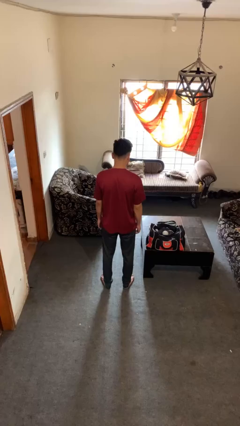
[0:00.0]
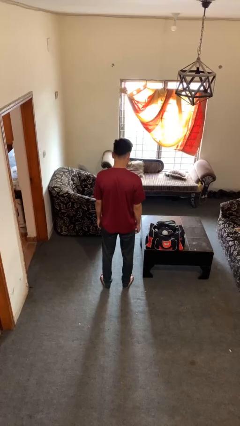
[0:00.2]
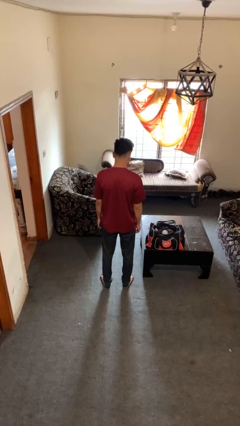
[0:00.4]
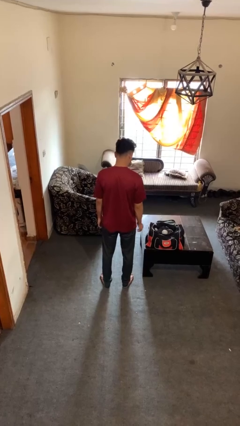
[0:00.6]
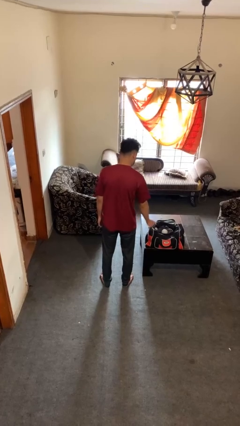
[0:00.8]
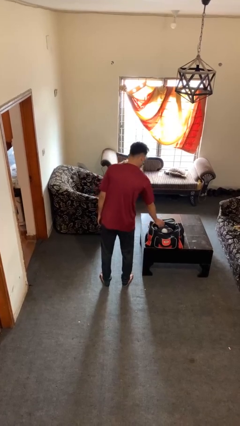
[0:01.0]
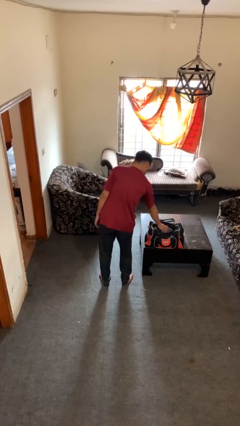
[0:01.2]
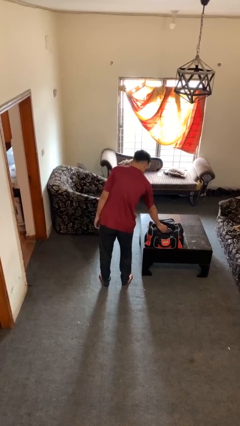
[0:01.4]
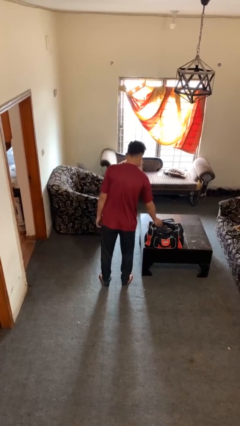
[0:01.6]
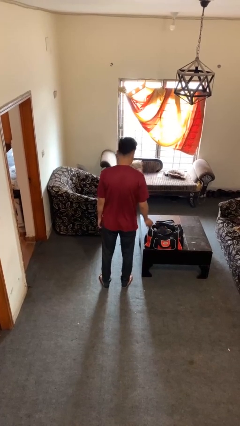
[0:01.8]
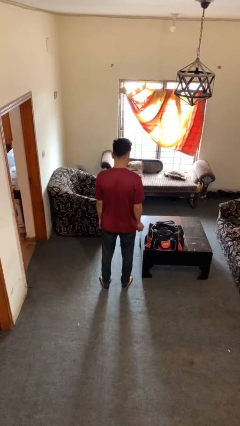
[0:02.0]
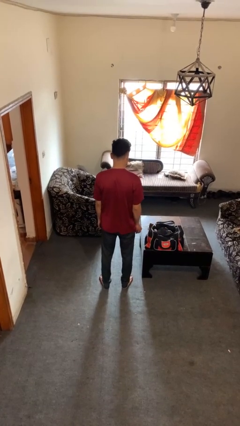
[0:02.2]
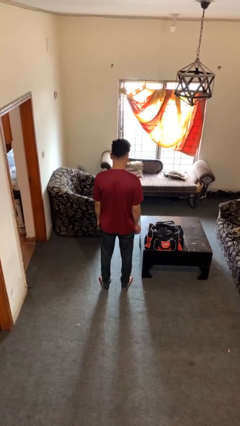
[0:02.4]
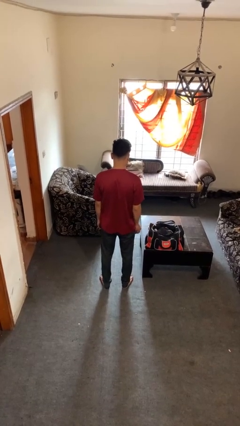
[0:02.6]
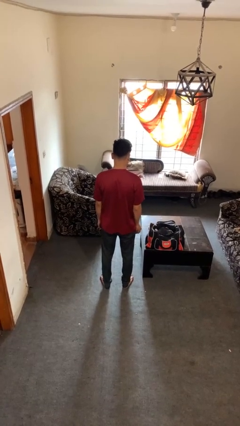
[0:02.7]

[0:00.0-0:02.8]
person takes object from bag

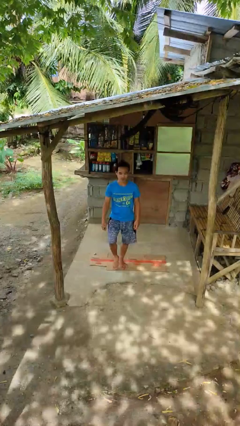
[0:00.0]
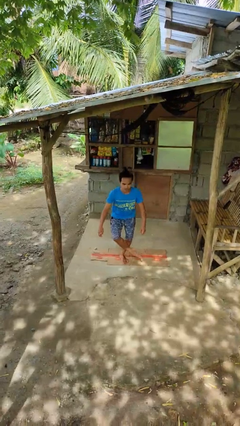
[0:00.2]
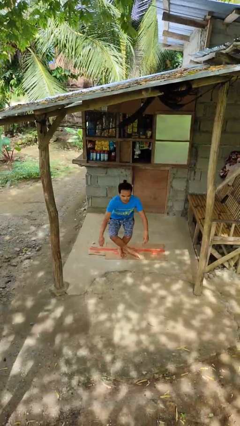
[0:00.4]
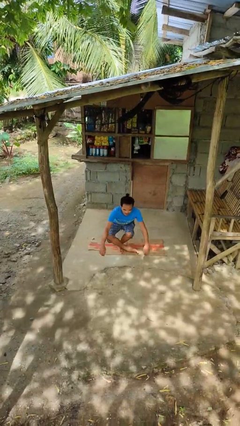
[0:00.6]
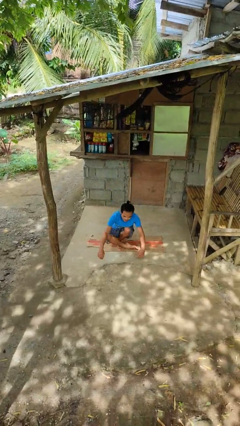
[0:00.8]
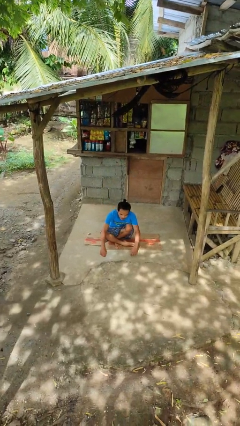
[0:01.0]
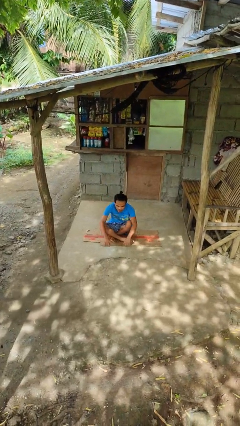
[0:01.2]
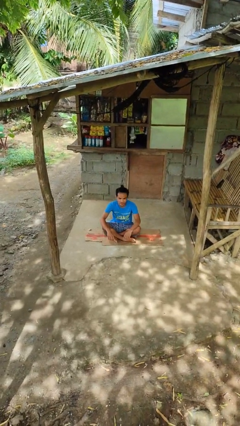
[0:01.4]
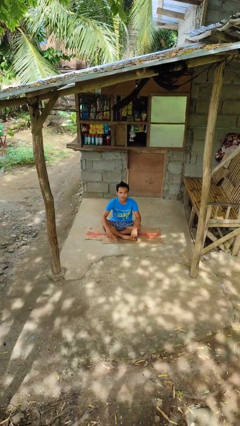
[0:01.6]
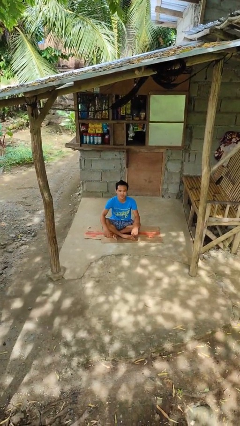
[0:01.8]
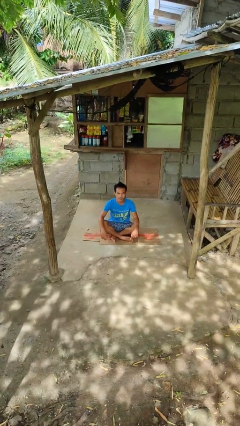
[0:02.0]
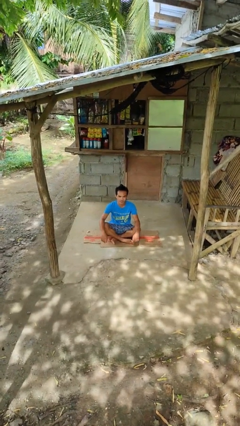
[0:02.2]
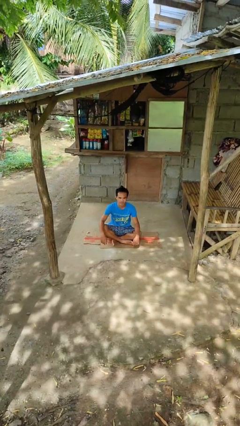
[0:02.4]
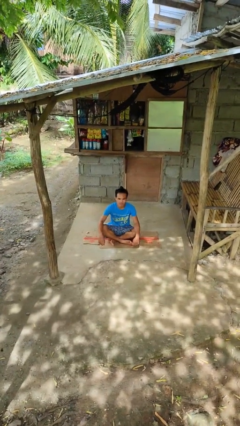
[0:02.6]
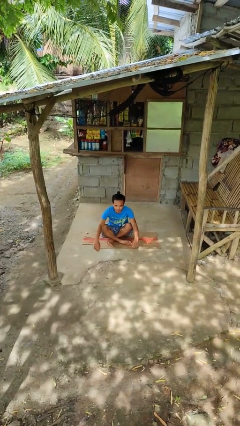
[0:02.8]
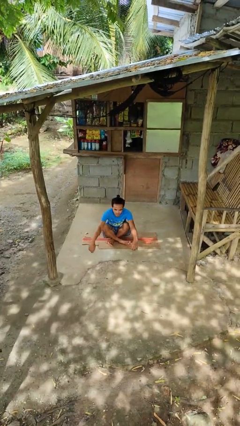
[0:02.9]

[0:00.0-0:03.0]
person sits crisscross

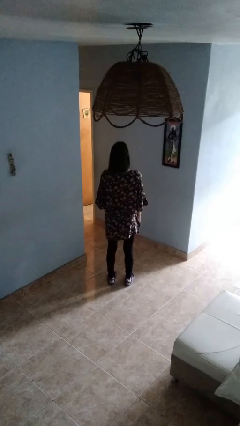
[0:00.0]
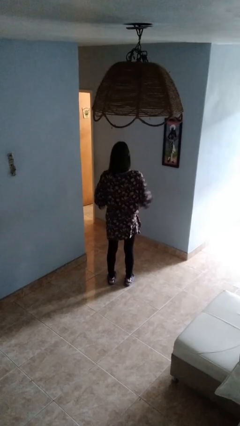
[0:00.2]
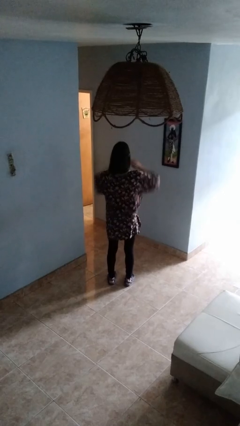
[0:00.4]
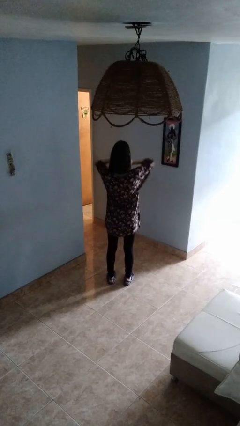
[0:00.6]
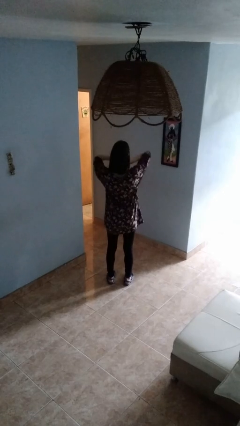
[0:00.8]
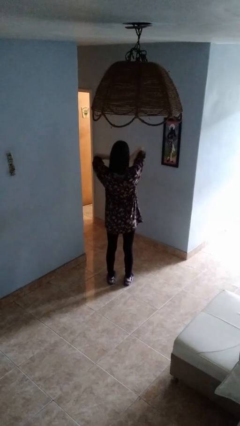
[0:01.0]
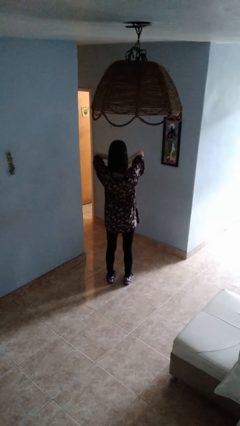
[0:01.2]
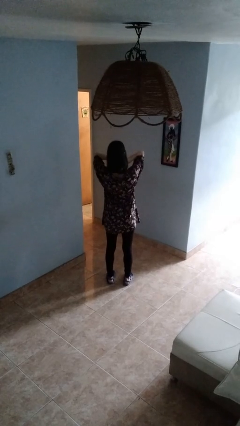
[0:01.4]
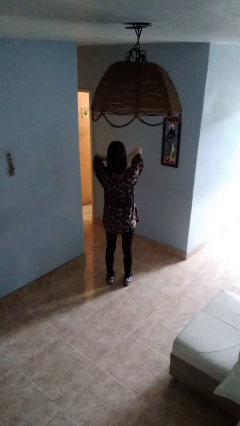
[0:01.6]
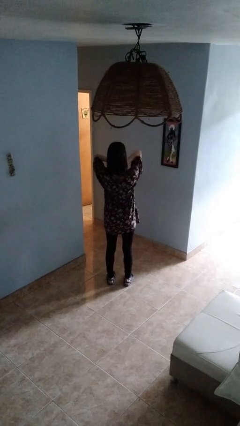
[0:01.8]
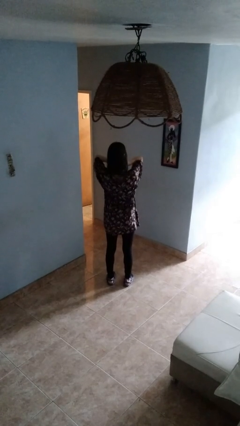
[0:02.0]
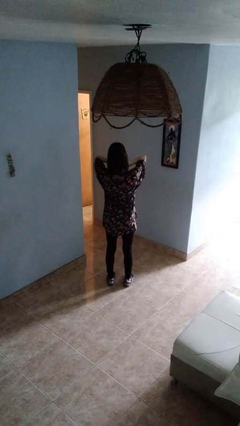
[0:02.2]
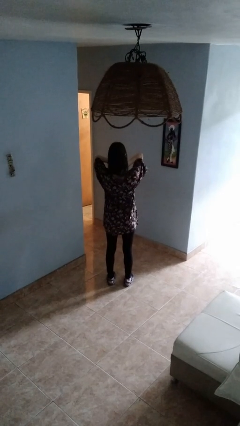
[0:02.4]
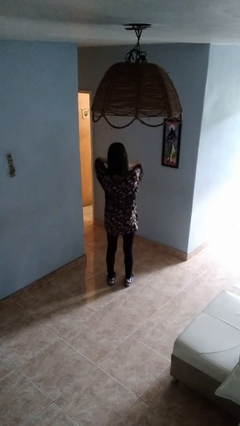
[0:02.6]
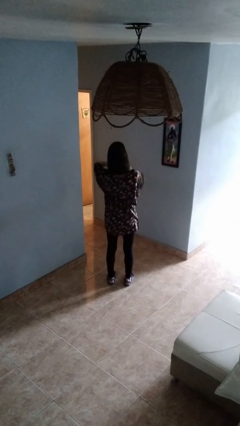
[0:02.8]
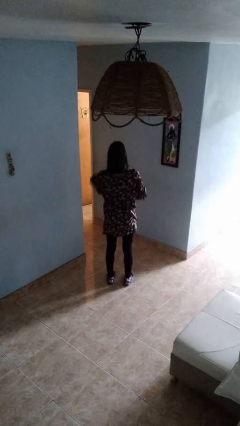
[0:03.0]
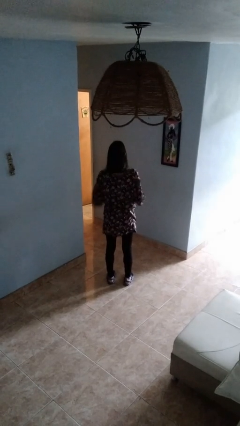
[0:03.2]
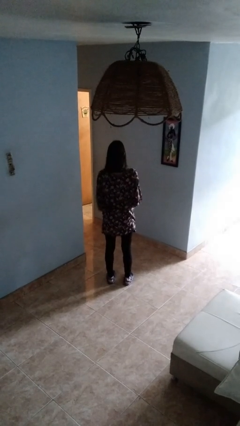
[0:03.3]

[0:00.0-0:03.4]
person rubs neck

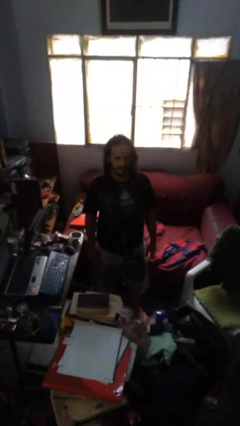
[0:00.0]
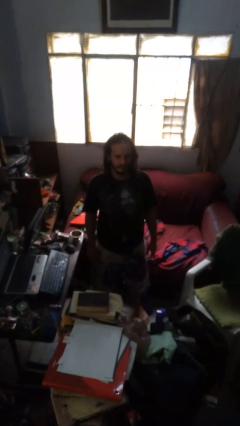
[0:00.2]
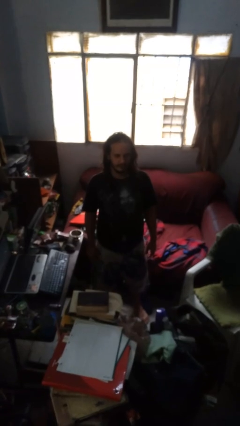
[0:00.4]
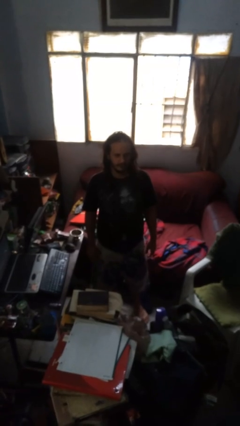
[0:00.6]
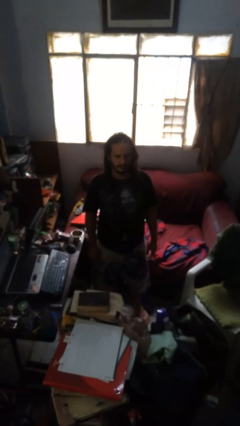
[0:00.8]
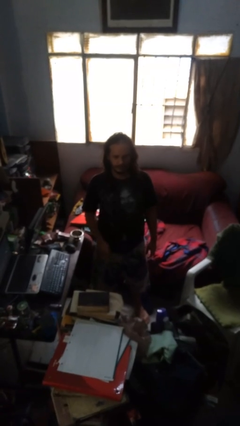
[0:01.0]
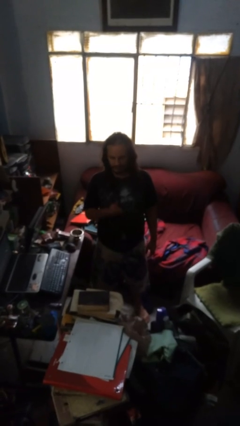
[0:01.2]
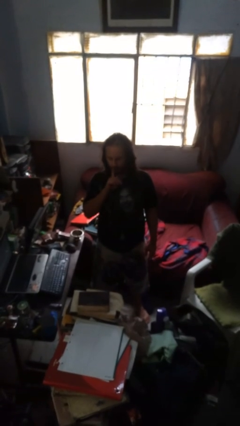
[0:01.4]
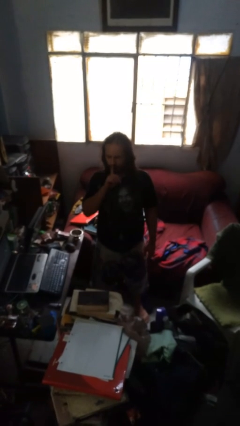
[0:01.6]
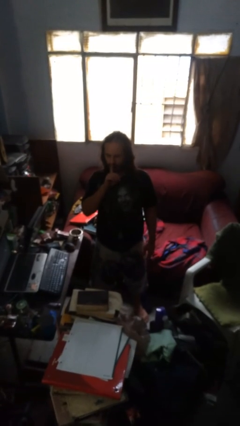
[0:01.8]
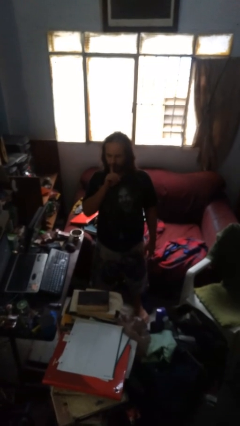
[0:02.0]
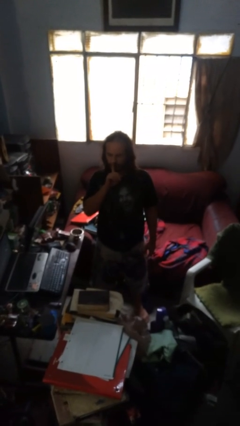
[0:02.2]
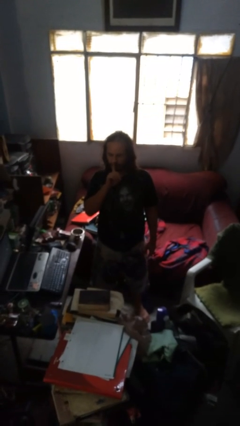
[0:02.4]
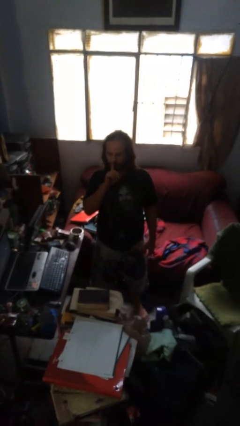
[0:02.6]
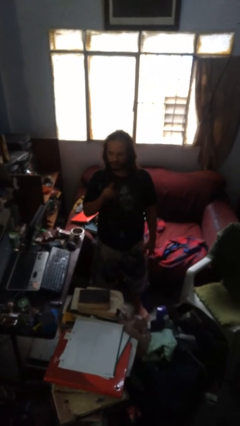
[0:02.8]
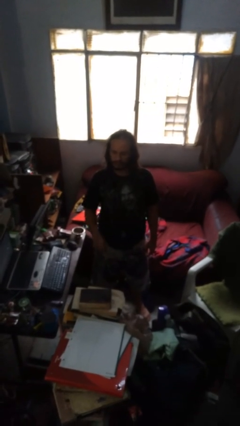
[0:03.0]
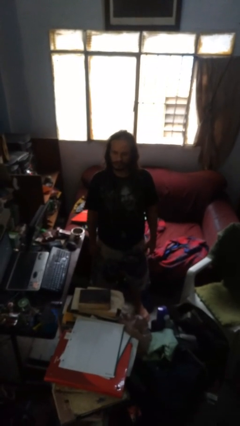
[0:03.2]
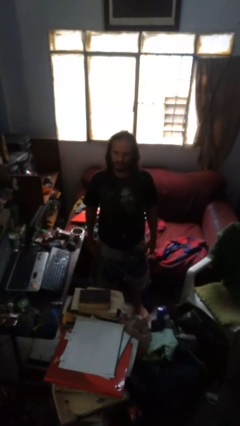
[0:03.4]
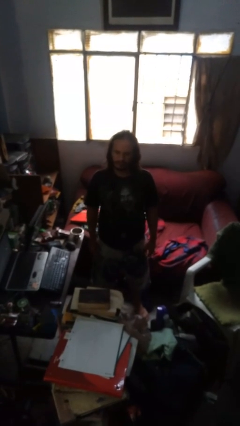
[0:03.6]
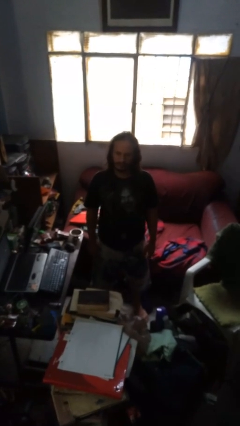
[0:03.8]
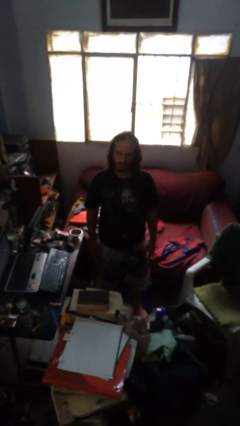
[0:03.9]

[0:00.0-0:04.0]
person gestures be quiet

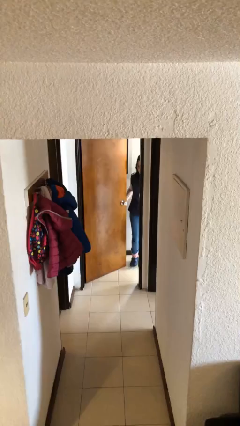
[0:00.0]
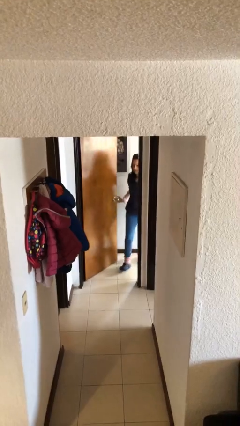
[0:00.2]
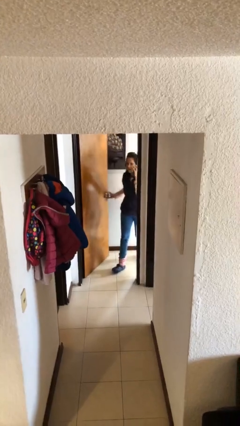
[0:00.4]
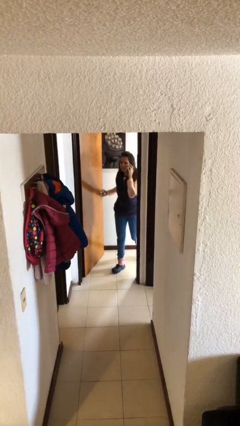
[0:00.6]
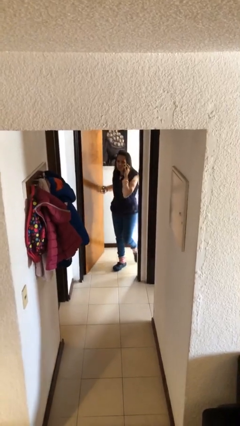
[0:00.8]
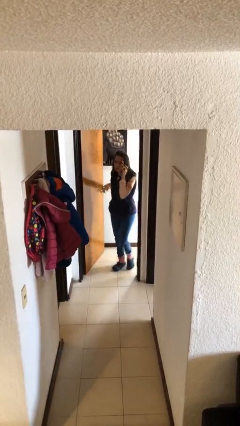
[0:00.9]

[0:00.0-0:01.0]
person opens facility door

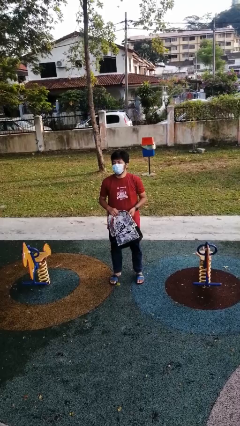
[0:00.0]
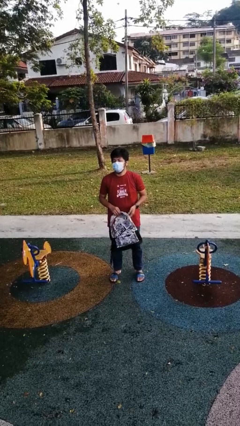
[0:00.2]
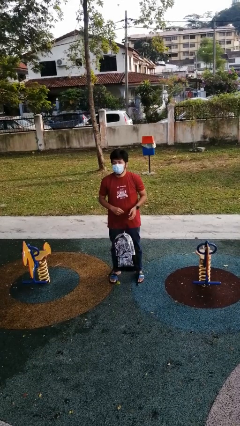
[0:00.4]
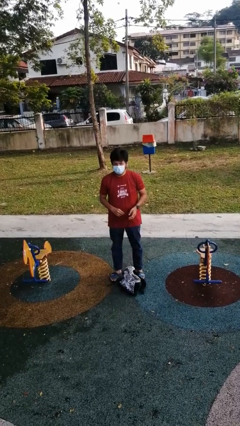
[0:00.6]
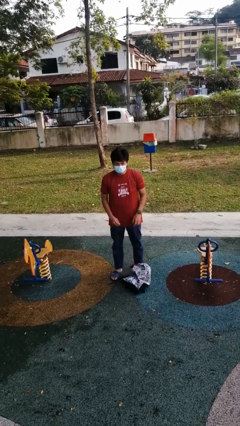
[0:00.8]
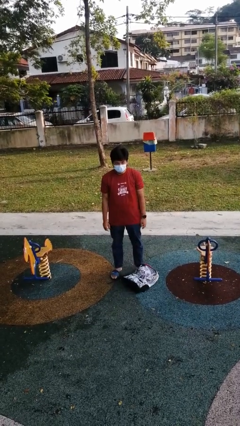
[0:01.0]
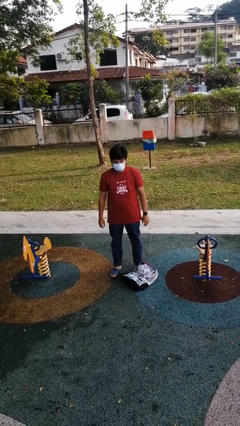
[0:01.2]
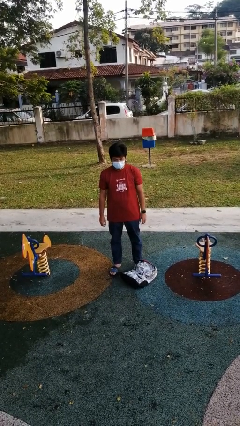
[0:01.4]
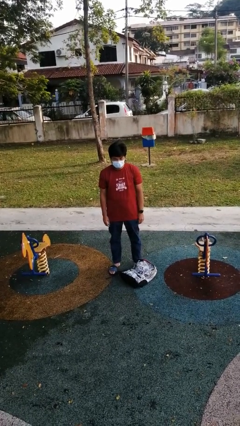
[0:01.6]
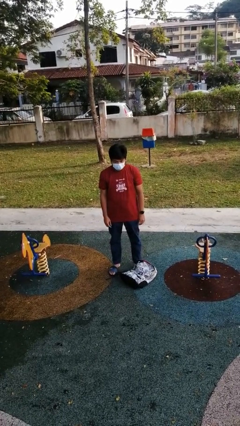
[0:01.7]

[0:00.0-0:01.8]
person drops object
